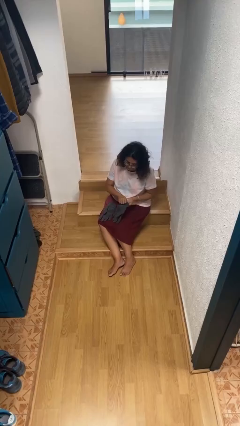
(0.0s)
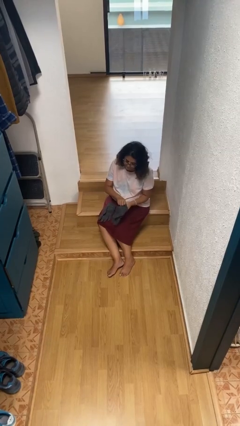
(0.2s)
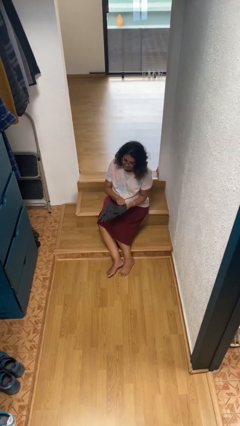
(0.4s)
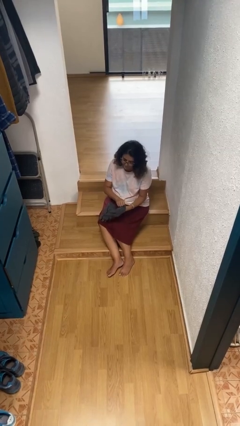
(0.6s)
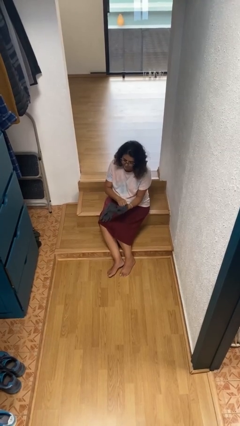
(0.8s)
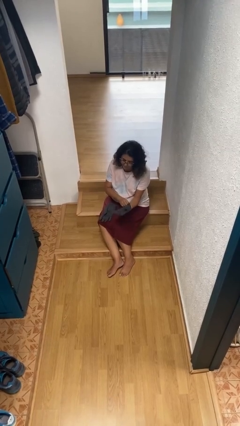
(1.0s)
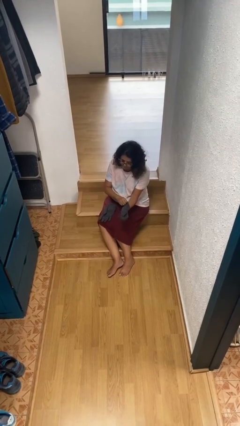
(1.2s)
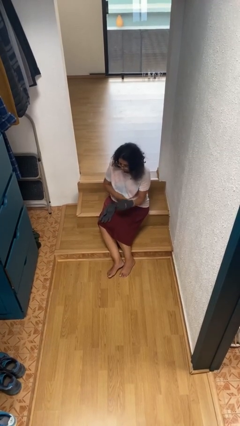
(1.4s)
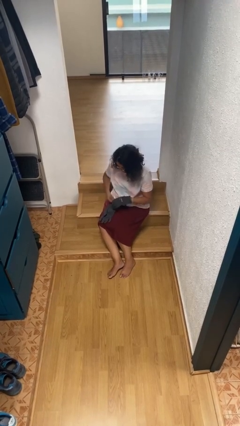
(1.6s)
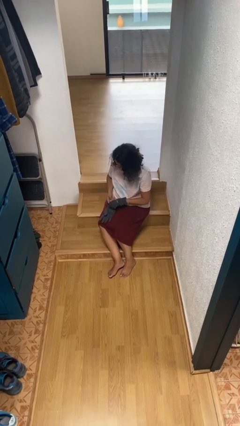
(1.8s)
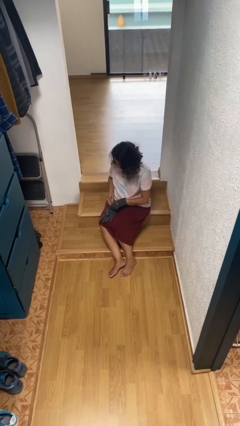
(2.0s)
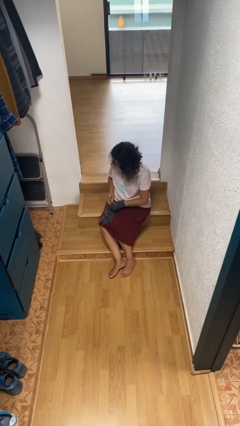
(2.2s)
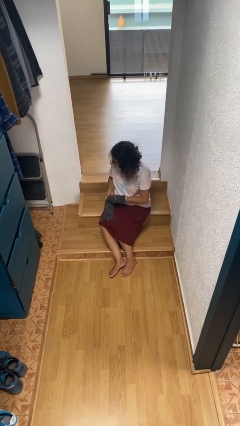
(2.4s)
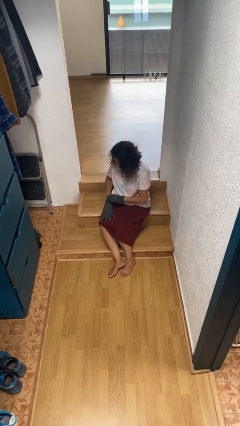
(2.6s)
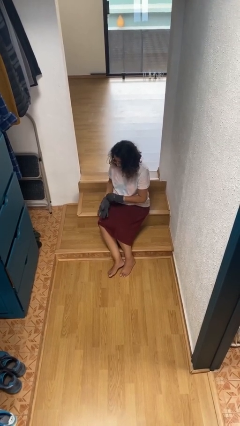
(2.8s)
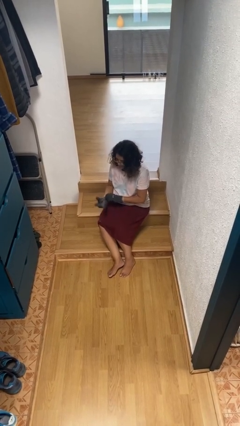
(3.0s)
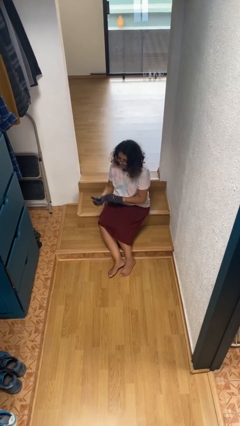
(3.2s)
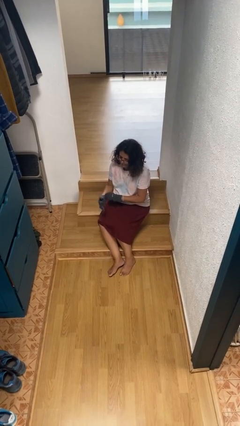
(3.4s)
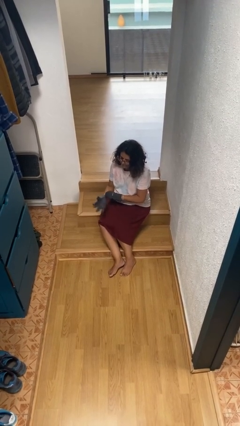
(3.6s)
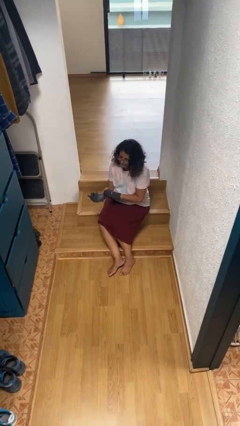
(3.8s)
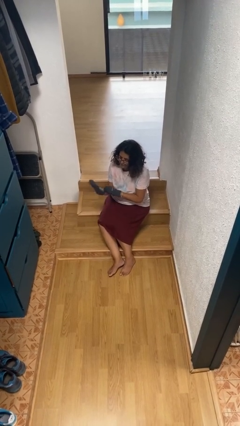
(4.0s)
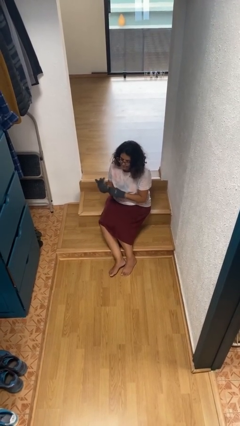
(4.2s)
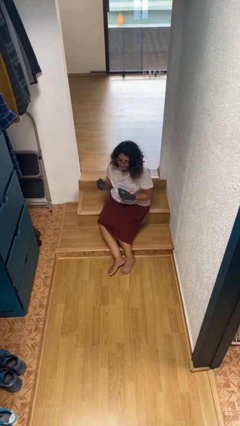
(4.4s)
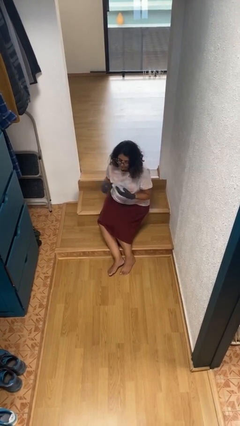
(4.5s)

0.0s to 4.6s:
person puts on gloves

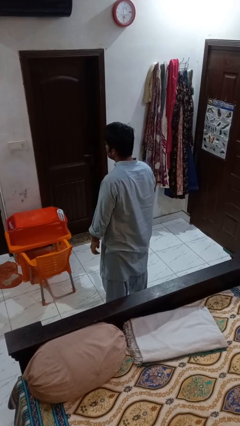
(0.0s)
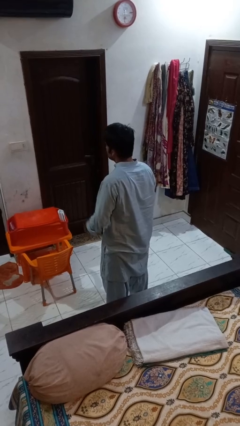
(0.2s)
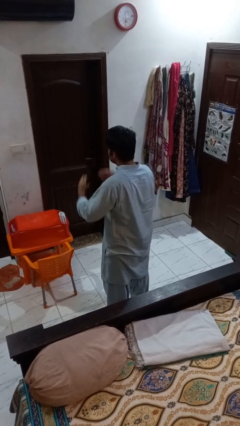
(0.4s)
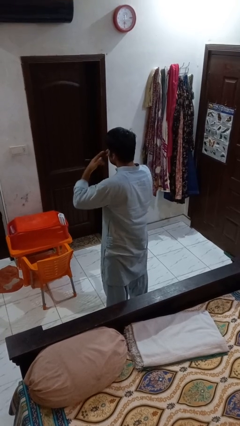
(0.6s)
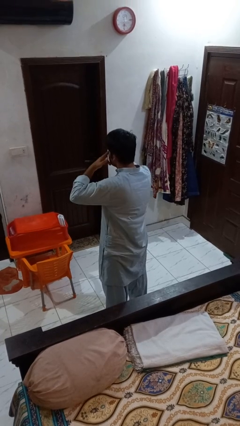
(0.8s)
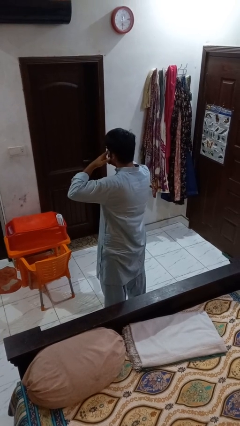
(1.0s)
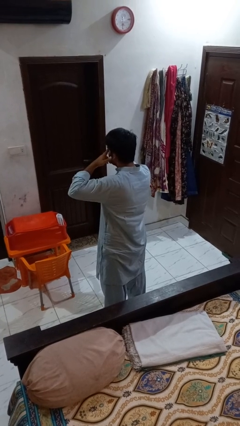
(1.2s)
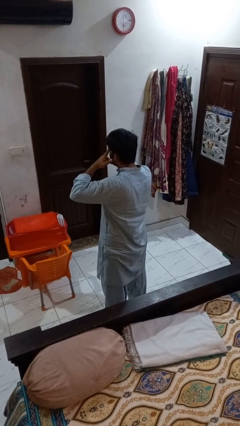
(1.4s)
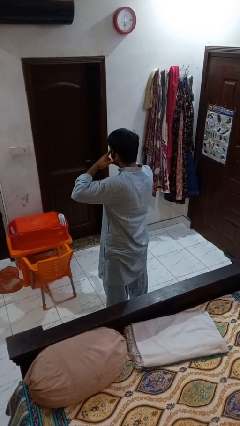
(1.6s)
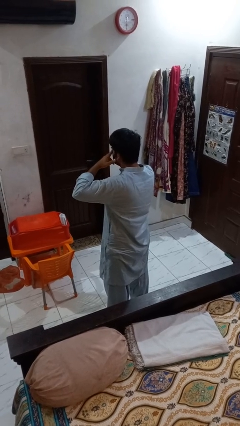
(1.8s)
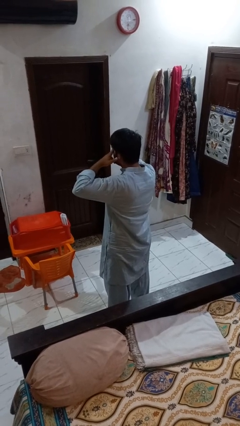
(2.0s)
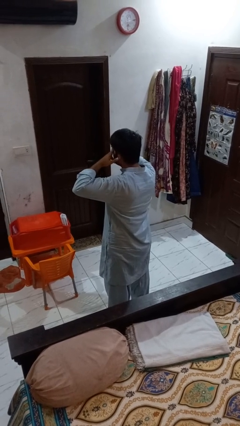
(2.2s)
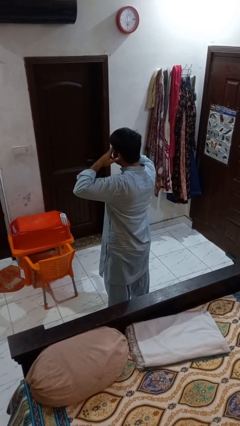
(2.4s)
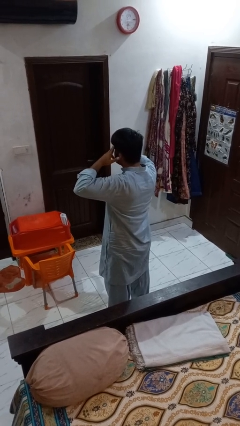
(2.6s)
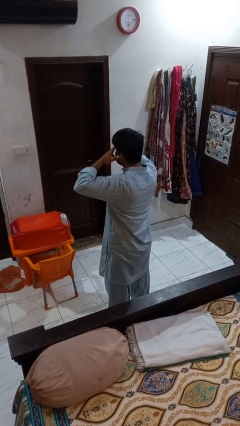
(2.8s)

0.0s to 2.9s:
person rubs eyes

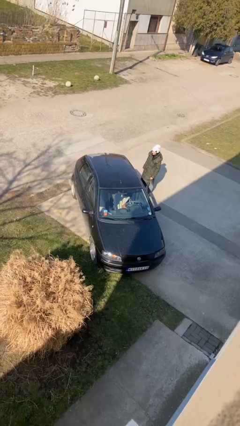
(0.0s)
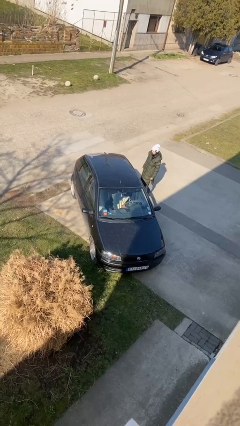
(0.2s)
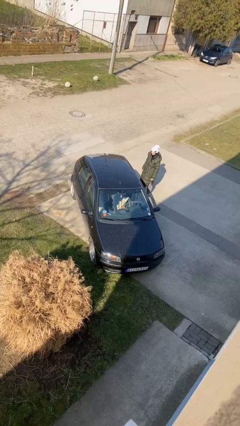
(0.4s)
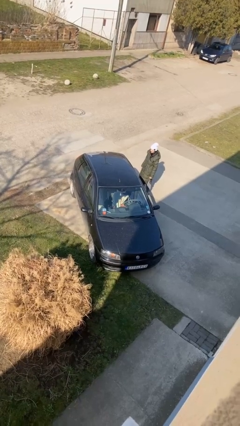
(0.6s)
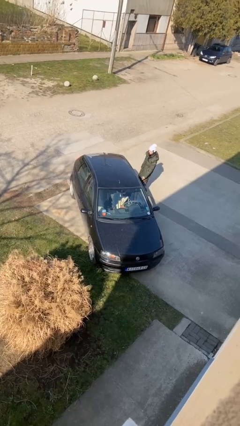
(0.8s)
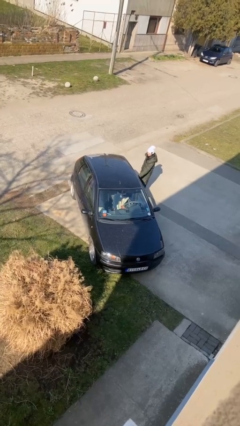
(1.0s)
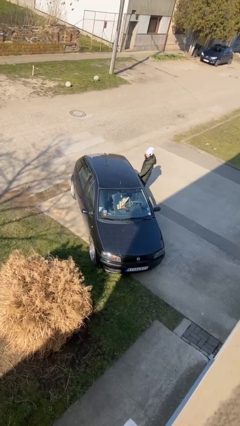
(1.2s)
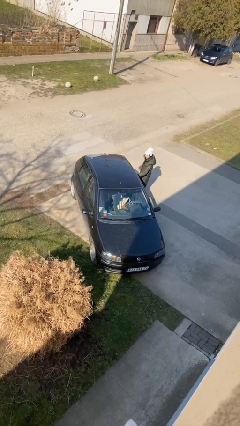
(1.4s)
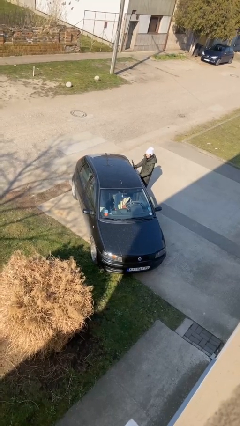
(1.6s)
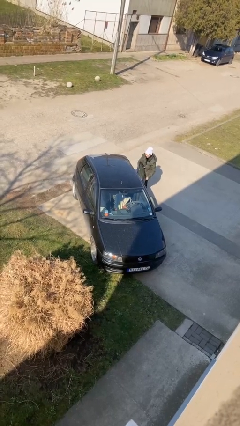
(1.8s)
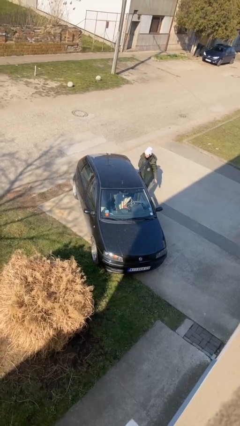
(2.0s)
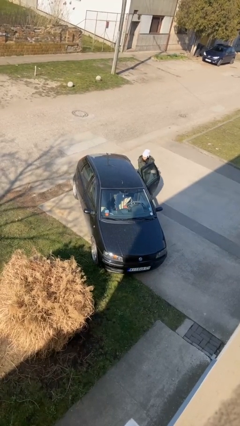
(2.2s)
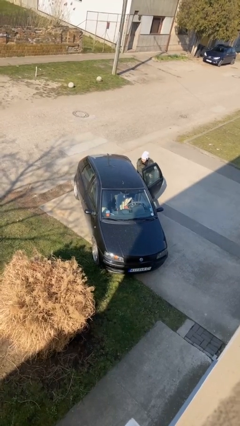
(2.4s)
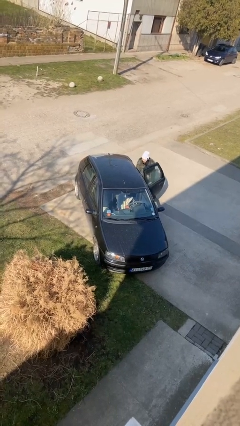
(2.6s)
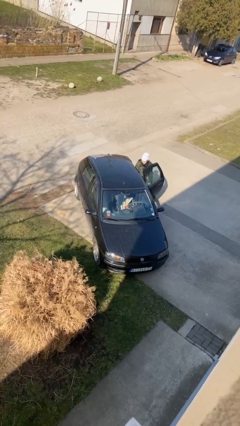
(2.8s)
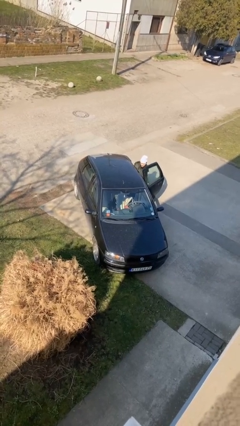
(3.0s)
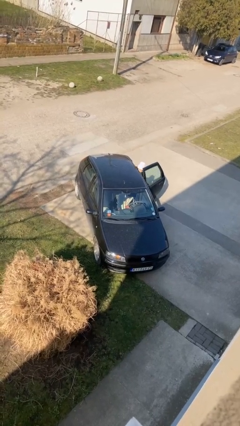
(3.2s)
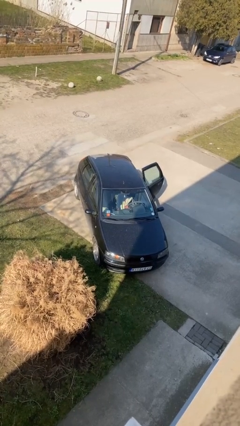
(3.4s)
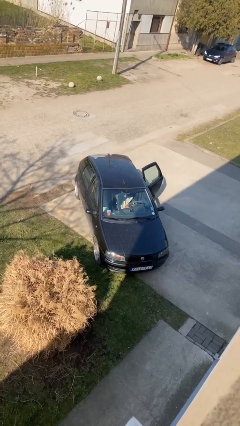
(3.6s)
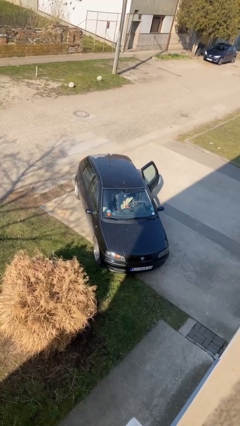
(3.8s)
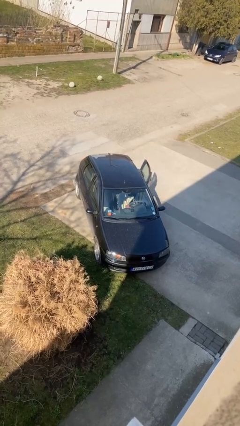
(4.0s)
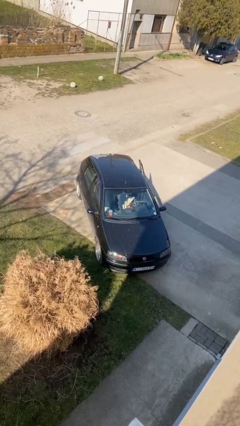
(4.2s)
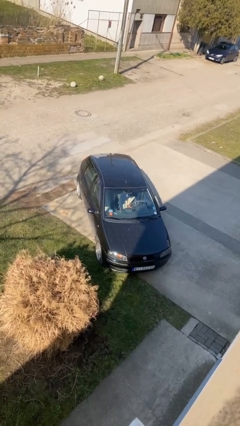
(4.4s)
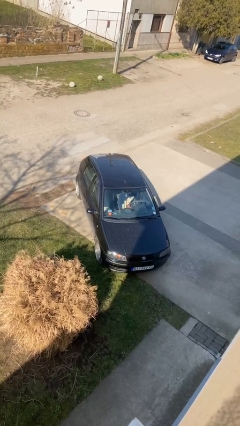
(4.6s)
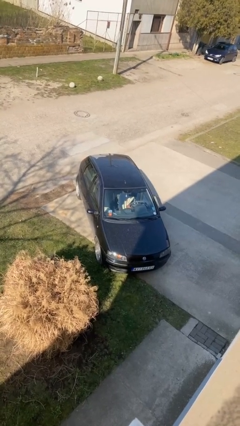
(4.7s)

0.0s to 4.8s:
car picks up person

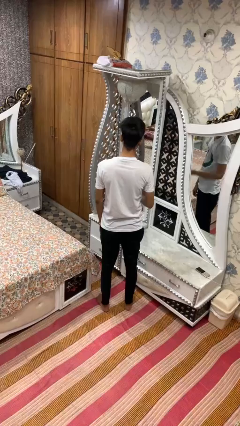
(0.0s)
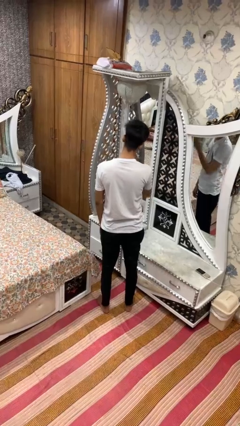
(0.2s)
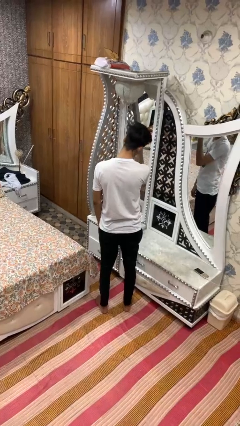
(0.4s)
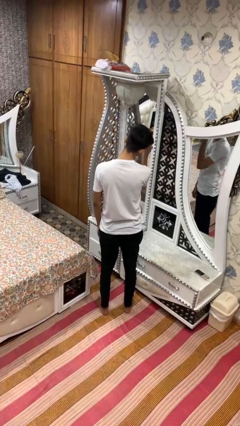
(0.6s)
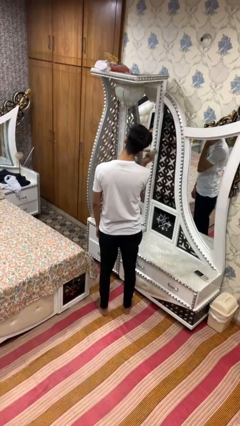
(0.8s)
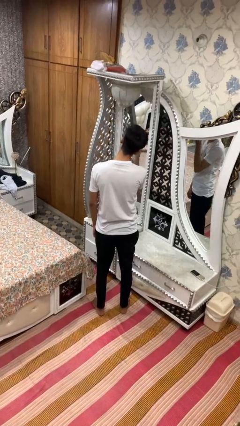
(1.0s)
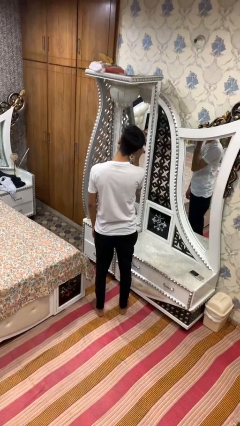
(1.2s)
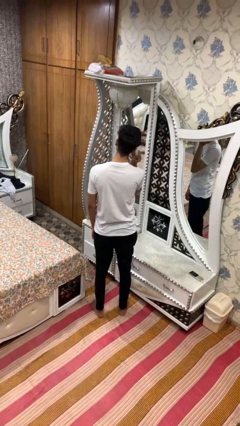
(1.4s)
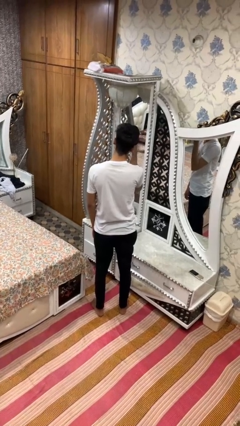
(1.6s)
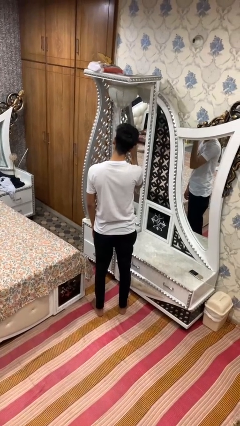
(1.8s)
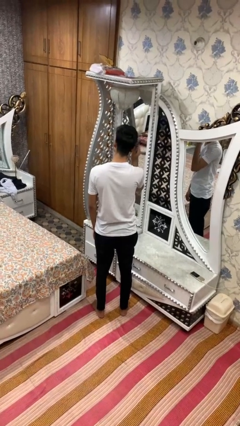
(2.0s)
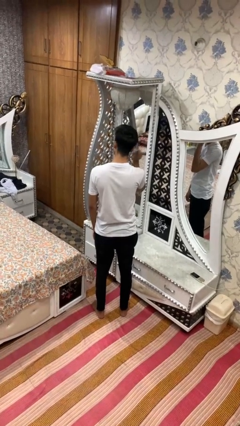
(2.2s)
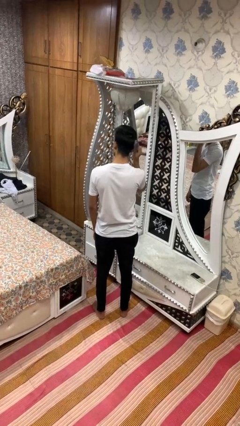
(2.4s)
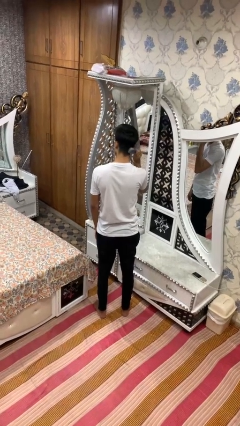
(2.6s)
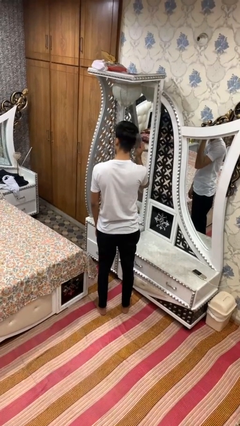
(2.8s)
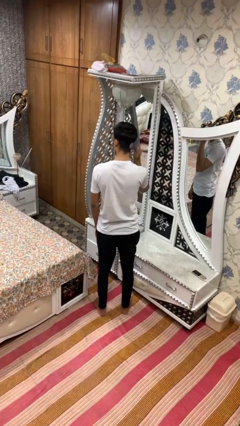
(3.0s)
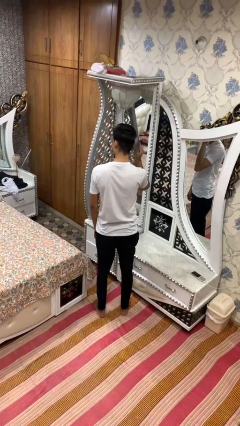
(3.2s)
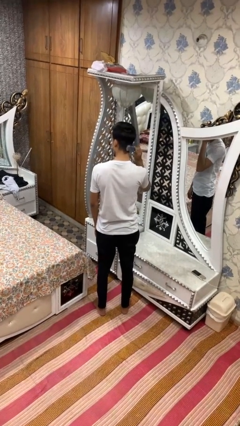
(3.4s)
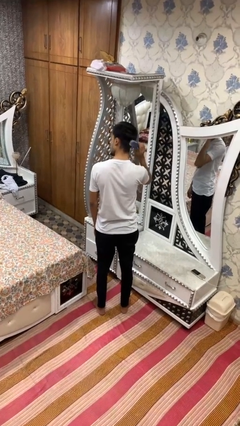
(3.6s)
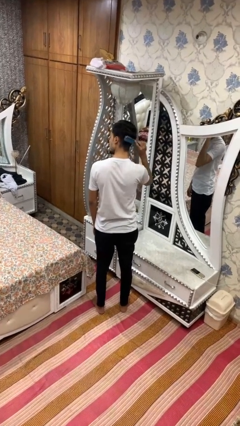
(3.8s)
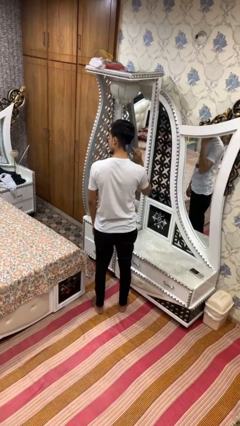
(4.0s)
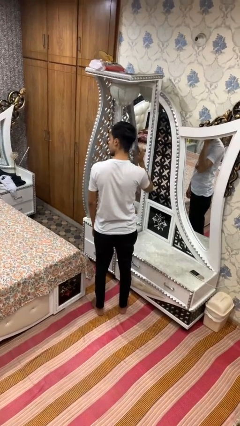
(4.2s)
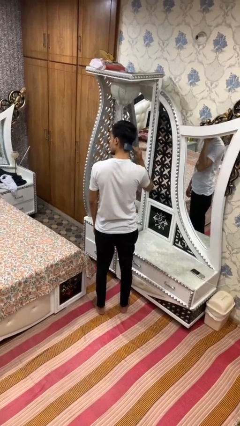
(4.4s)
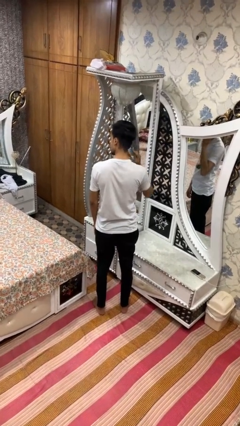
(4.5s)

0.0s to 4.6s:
person brushes hair

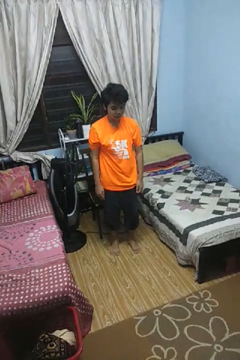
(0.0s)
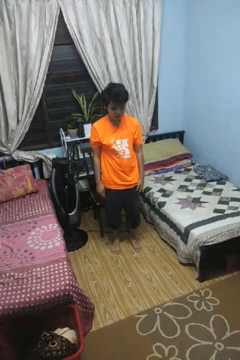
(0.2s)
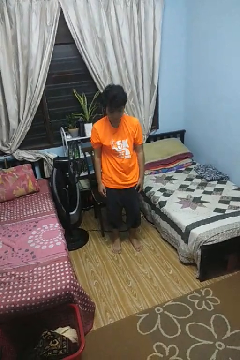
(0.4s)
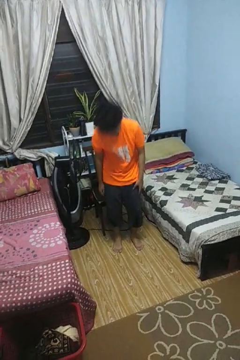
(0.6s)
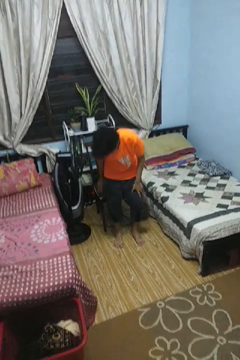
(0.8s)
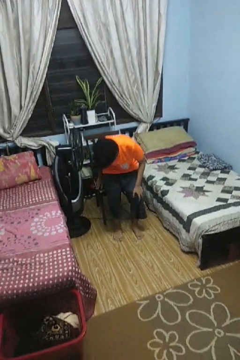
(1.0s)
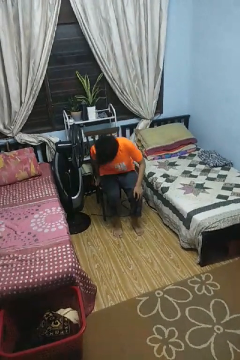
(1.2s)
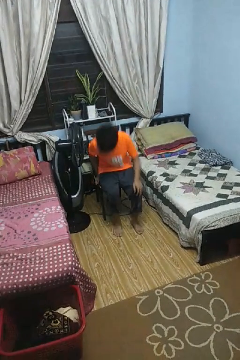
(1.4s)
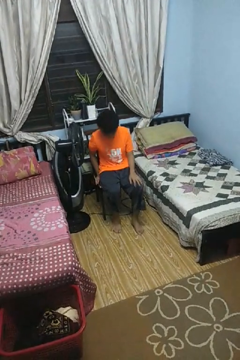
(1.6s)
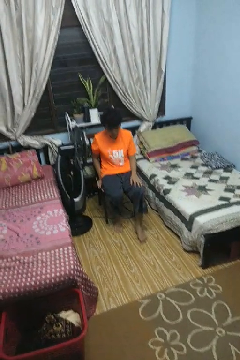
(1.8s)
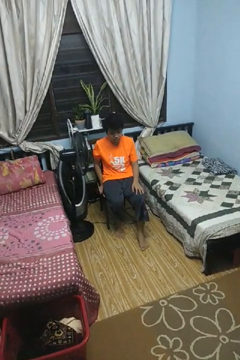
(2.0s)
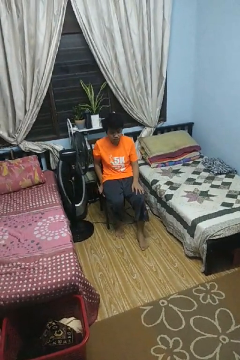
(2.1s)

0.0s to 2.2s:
person sits down
